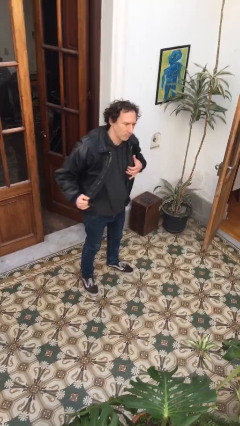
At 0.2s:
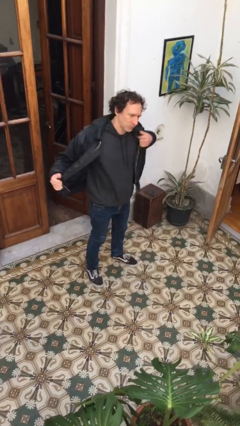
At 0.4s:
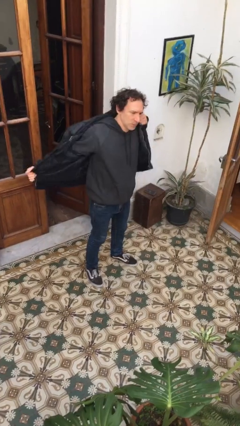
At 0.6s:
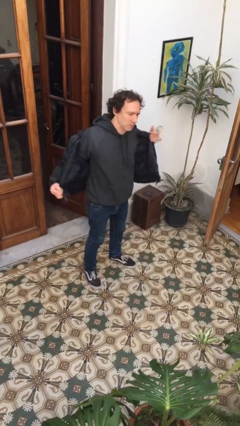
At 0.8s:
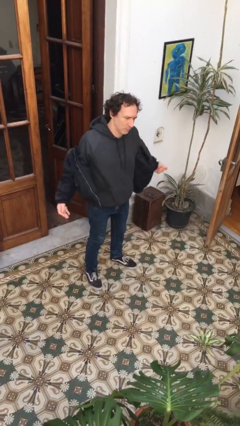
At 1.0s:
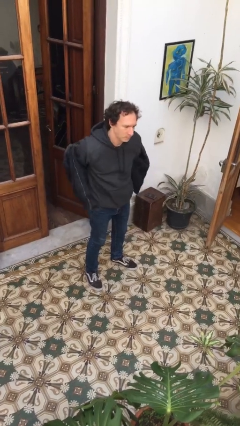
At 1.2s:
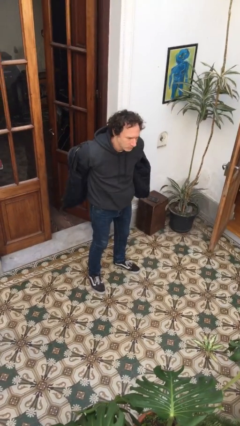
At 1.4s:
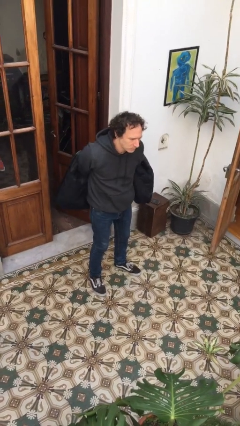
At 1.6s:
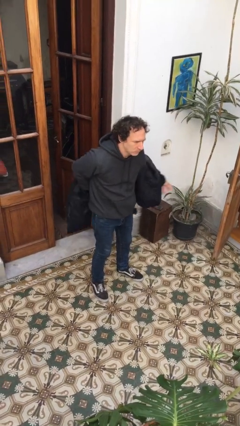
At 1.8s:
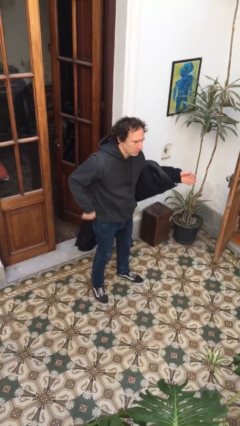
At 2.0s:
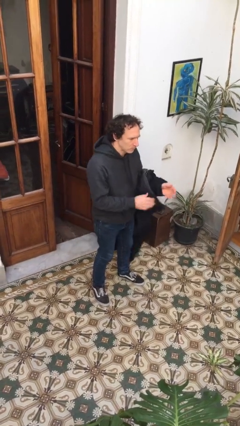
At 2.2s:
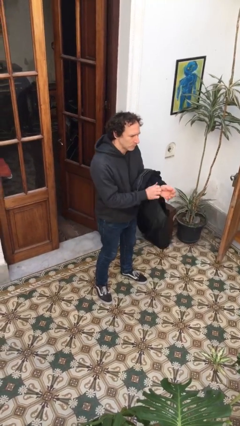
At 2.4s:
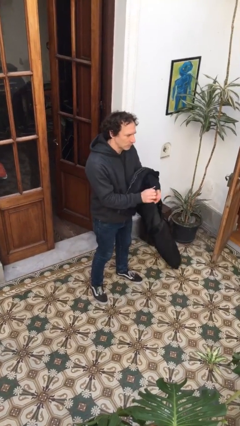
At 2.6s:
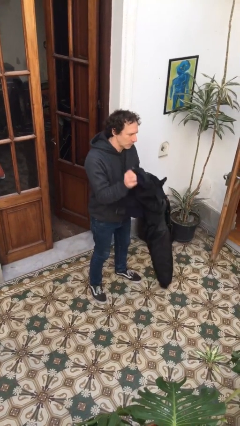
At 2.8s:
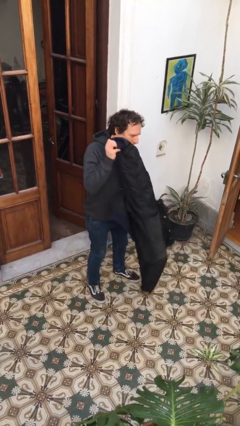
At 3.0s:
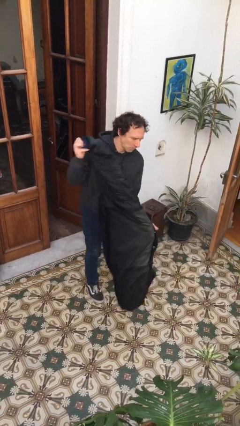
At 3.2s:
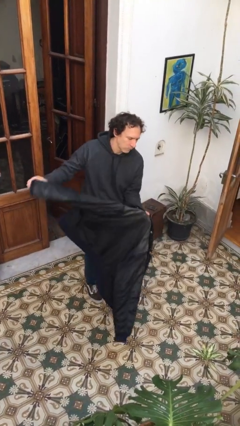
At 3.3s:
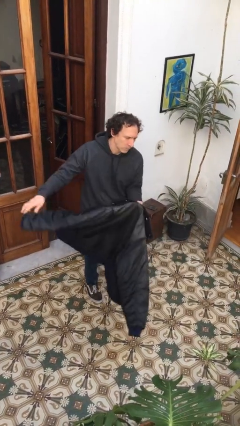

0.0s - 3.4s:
person takes off jacket

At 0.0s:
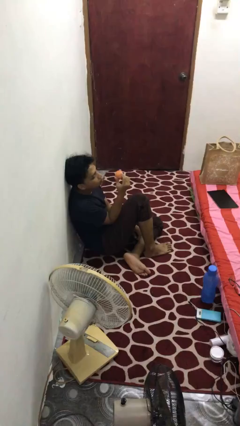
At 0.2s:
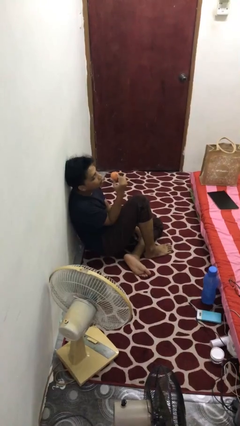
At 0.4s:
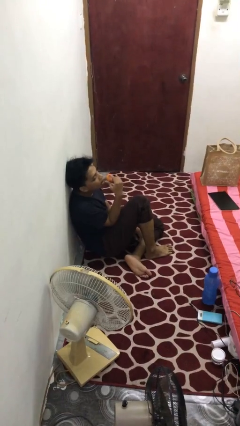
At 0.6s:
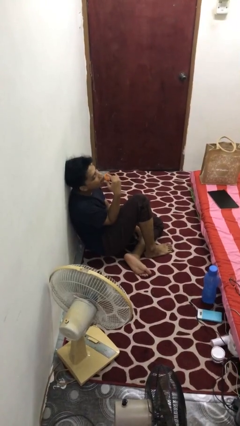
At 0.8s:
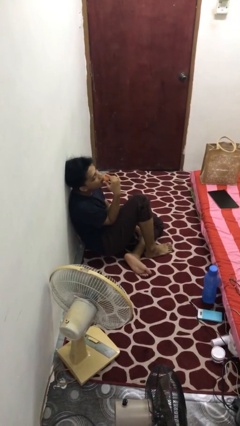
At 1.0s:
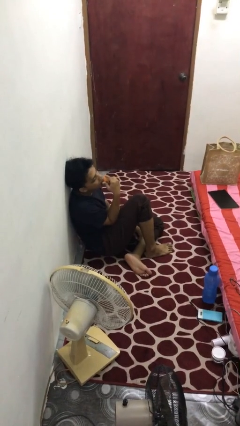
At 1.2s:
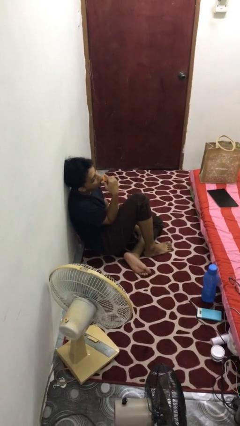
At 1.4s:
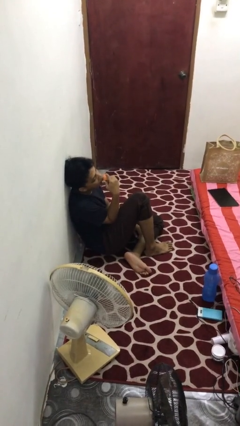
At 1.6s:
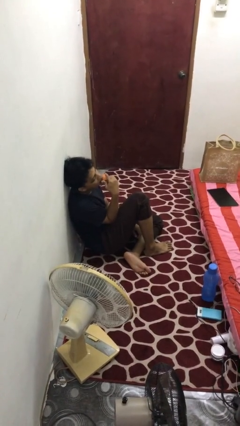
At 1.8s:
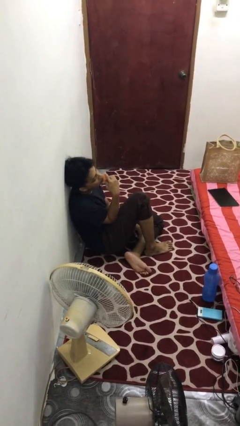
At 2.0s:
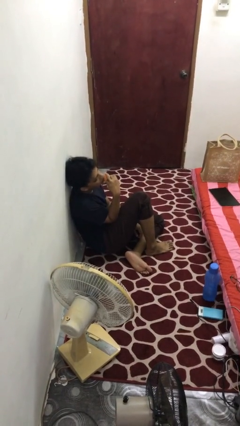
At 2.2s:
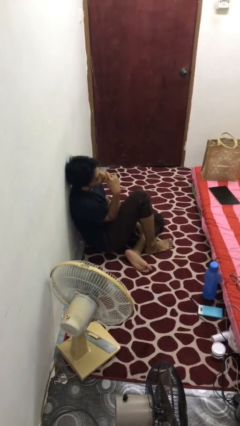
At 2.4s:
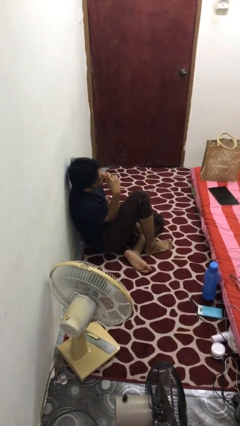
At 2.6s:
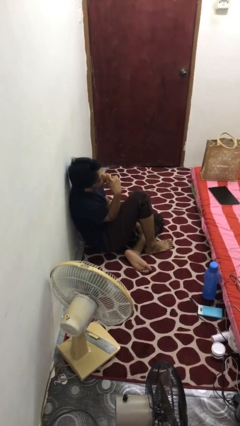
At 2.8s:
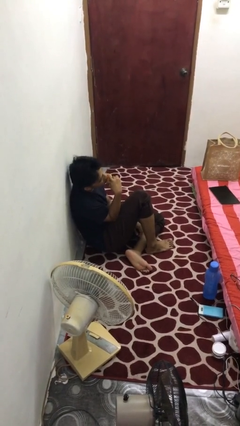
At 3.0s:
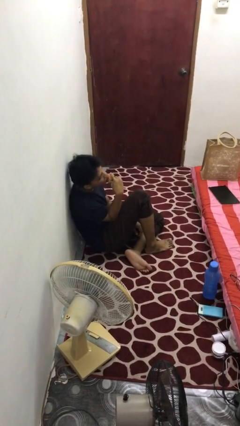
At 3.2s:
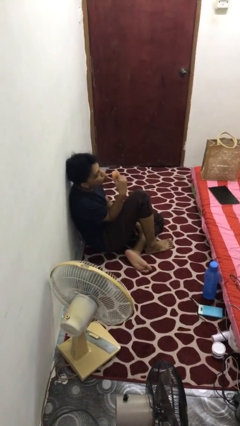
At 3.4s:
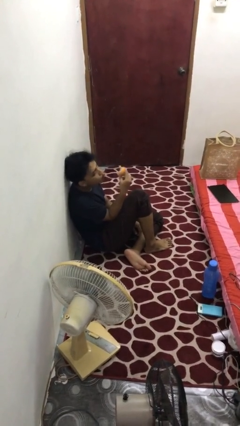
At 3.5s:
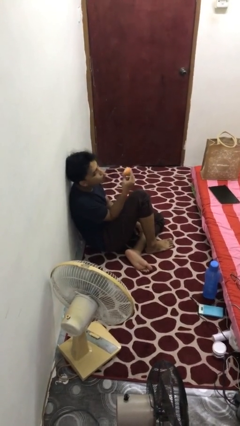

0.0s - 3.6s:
person eats apple

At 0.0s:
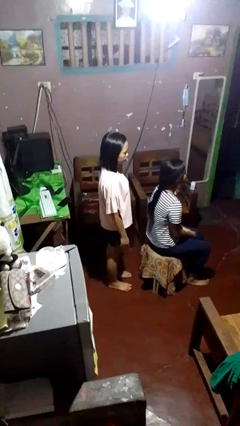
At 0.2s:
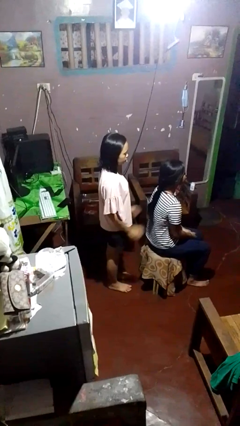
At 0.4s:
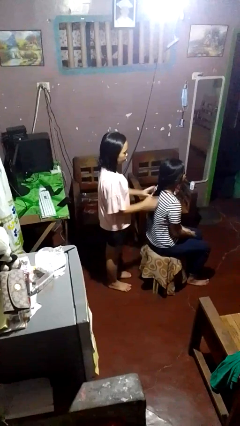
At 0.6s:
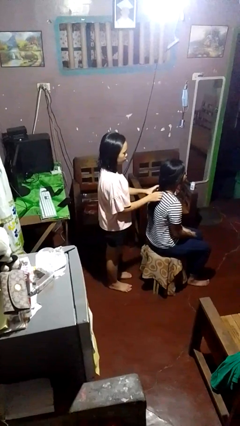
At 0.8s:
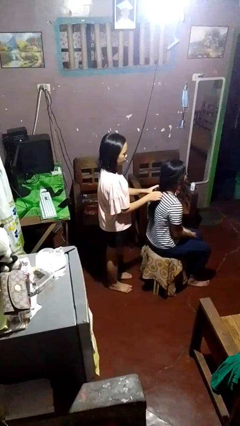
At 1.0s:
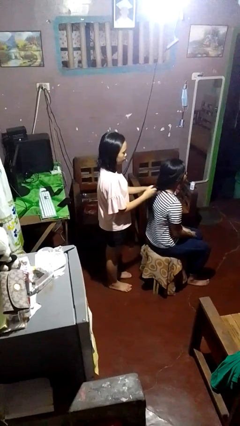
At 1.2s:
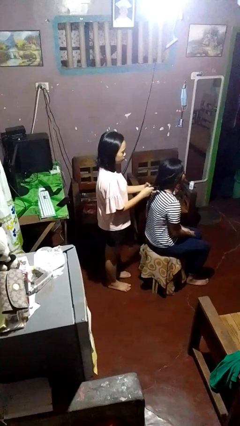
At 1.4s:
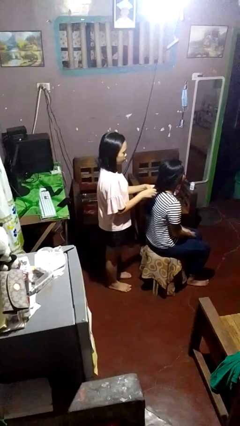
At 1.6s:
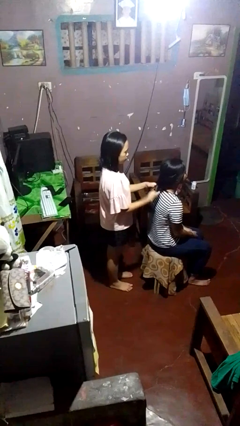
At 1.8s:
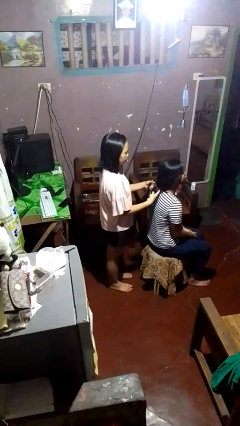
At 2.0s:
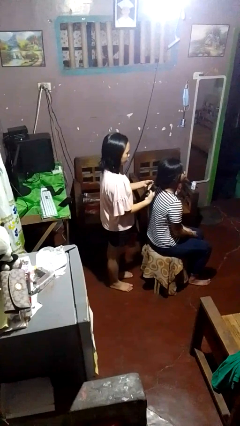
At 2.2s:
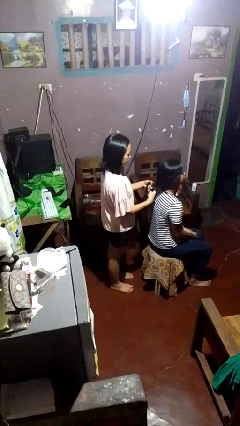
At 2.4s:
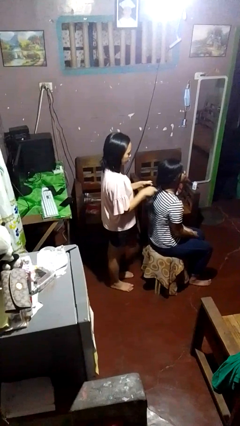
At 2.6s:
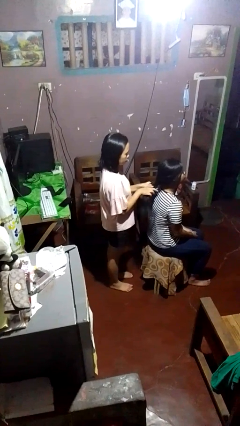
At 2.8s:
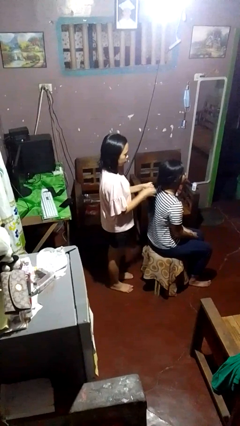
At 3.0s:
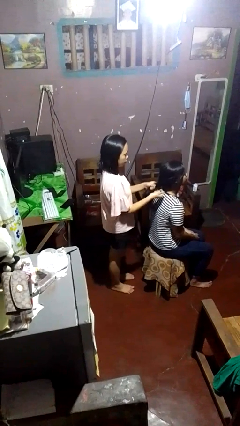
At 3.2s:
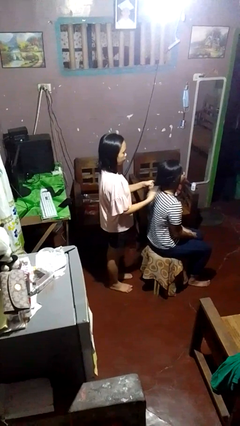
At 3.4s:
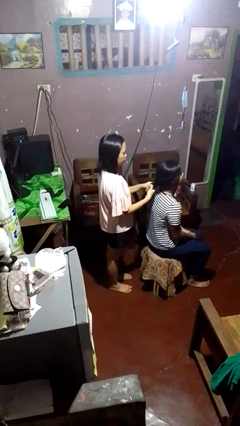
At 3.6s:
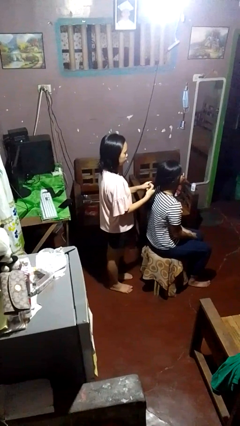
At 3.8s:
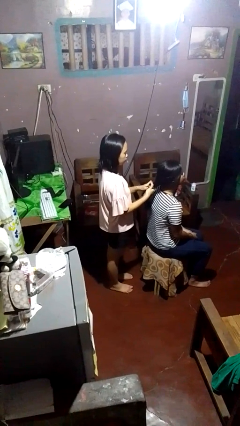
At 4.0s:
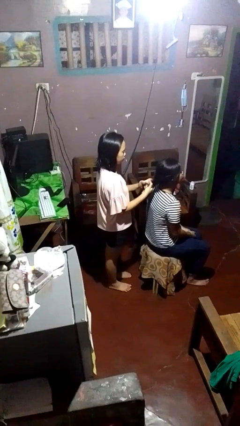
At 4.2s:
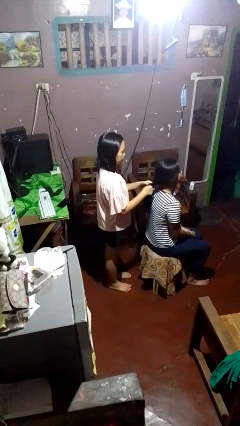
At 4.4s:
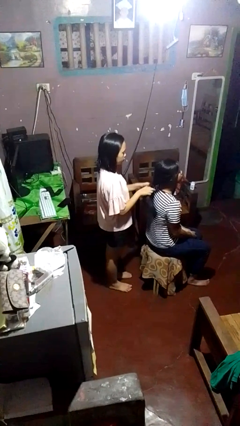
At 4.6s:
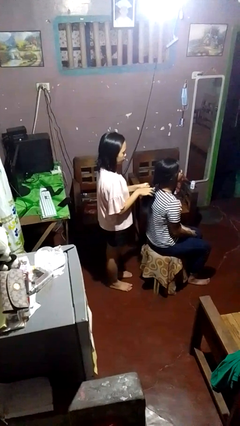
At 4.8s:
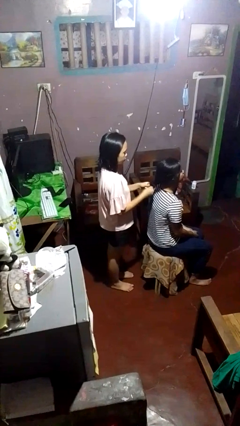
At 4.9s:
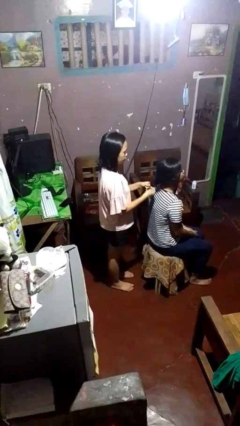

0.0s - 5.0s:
person braids hair of person

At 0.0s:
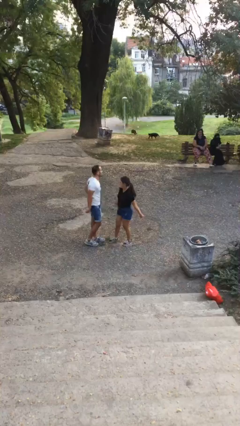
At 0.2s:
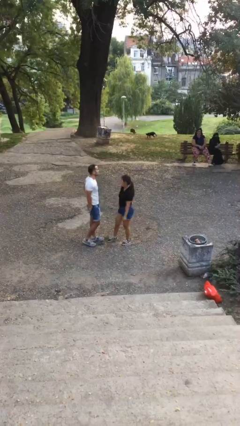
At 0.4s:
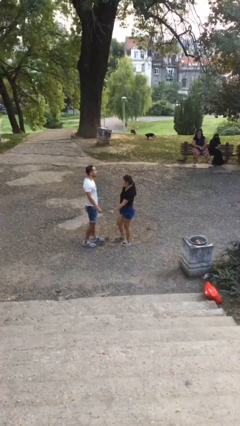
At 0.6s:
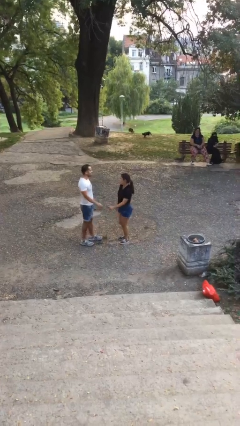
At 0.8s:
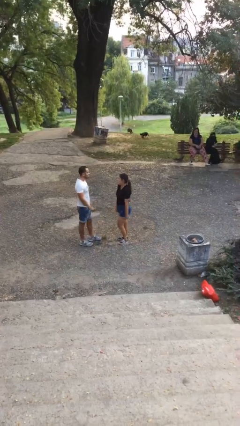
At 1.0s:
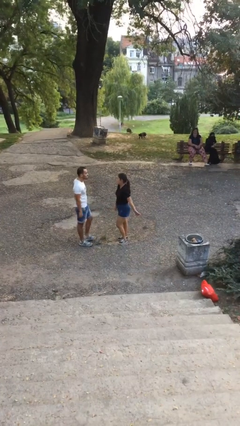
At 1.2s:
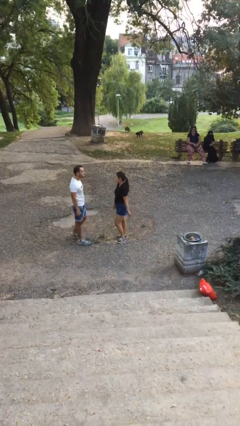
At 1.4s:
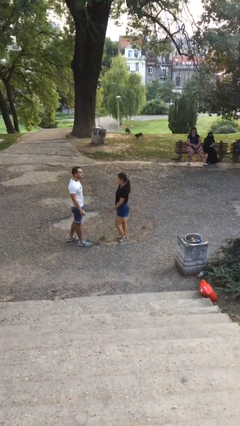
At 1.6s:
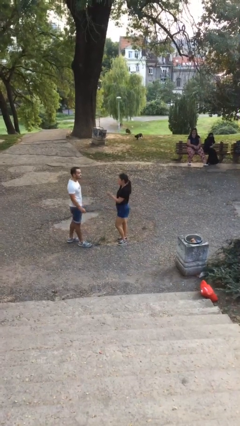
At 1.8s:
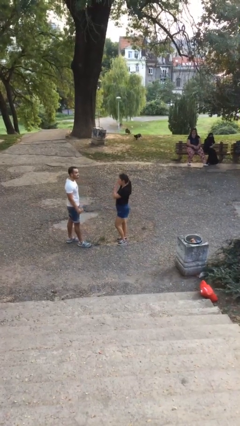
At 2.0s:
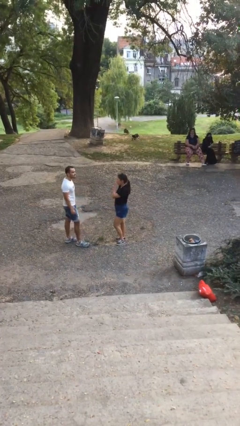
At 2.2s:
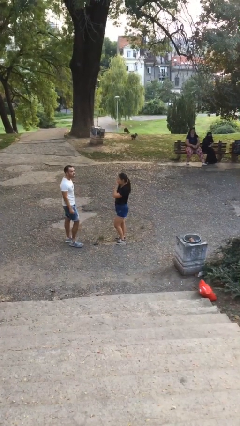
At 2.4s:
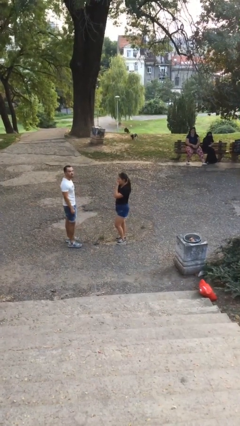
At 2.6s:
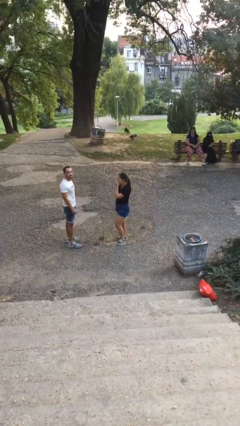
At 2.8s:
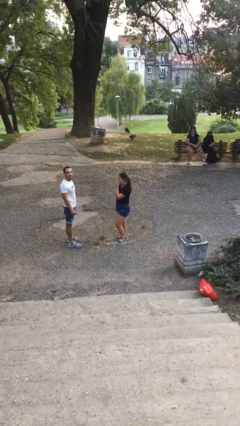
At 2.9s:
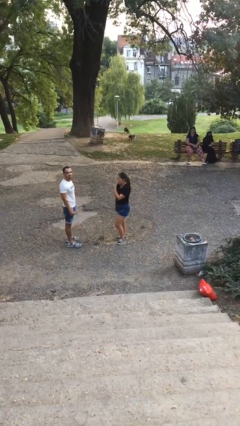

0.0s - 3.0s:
person talks to person

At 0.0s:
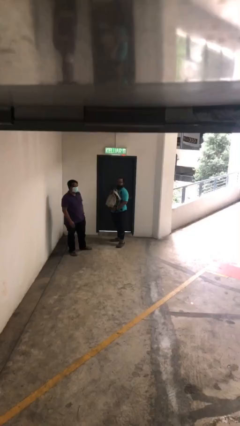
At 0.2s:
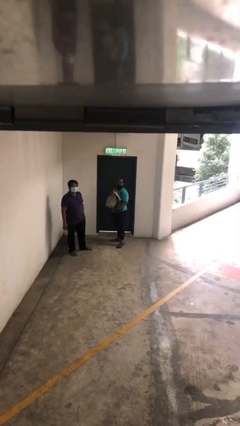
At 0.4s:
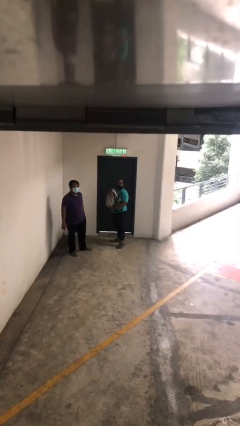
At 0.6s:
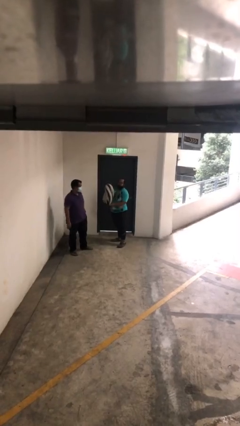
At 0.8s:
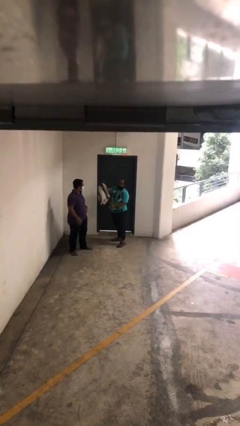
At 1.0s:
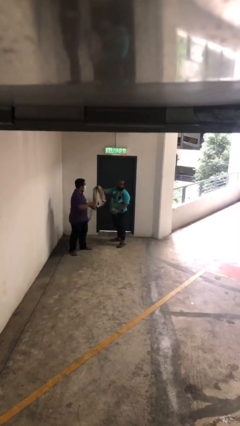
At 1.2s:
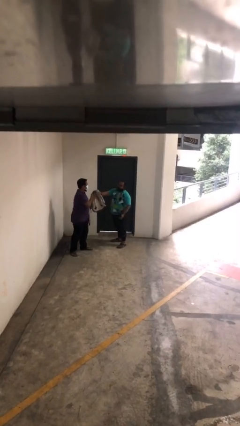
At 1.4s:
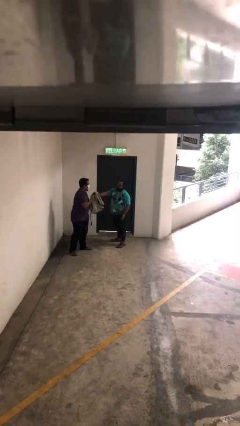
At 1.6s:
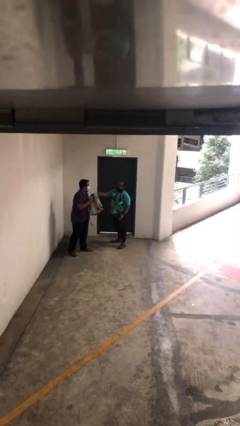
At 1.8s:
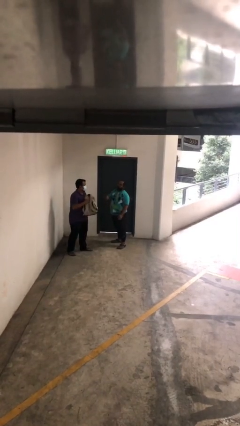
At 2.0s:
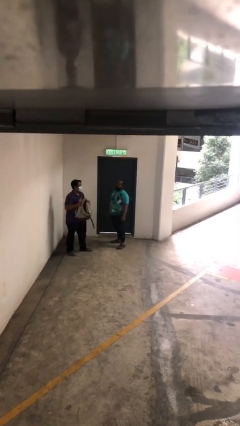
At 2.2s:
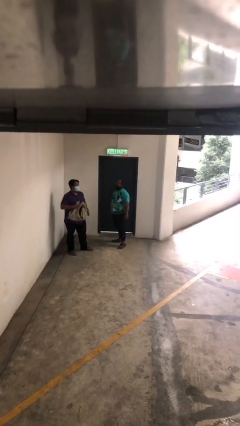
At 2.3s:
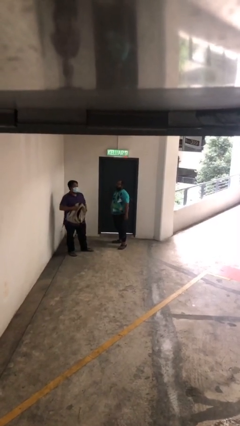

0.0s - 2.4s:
person transfers object to person
